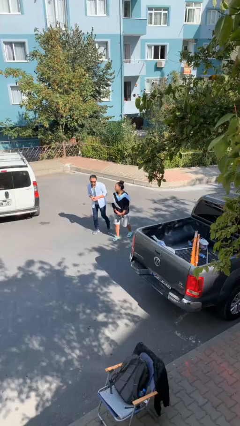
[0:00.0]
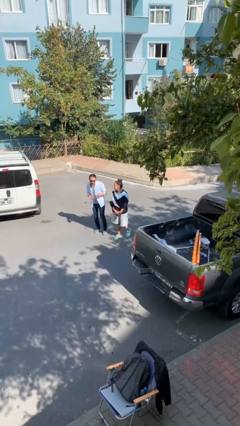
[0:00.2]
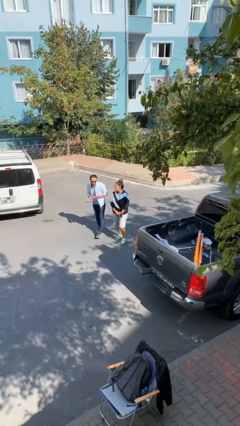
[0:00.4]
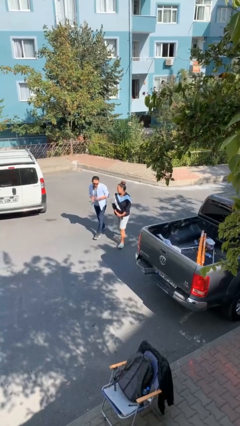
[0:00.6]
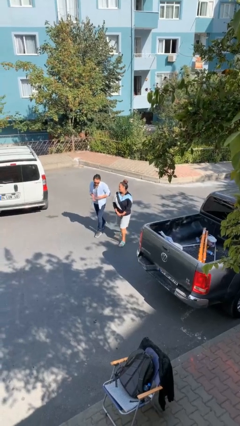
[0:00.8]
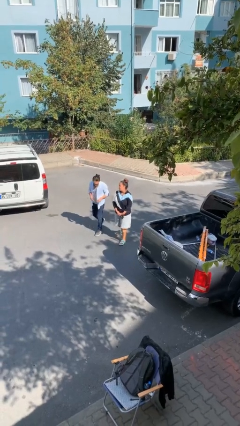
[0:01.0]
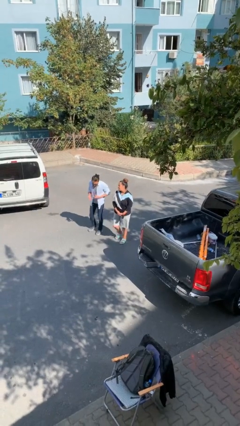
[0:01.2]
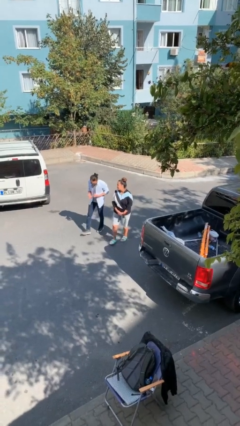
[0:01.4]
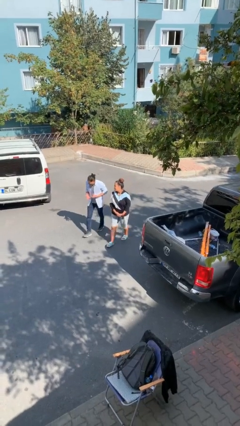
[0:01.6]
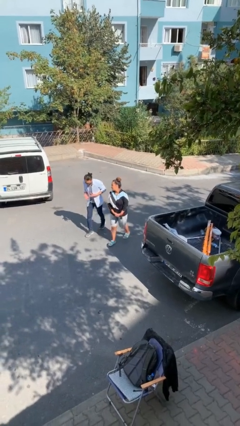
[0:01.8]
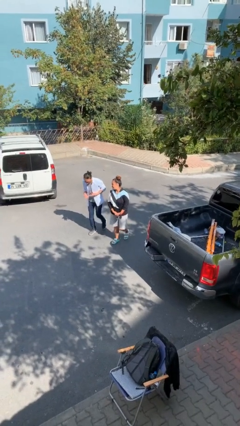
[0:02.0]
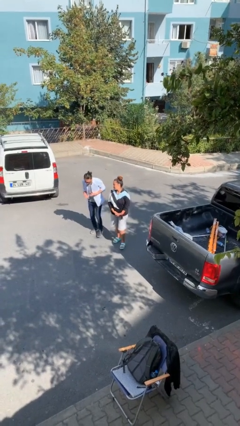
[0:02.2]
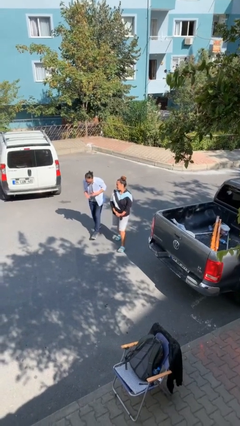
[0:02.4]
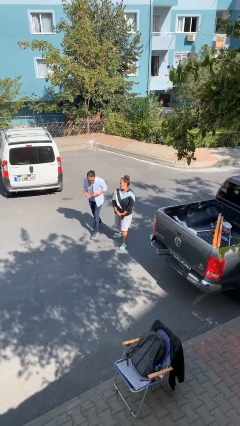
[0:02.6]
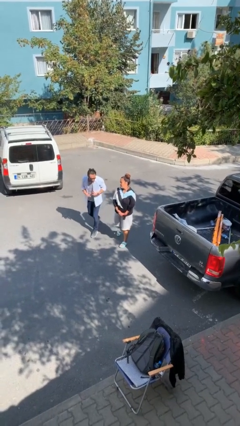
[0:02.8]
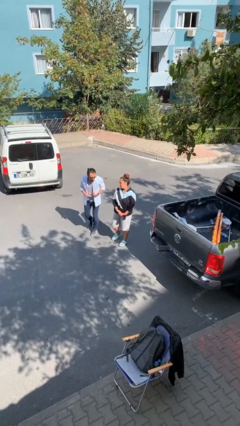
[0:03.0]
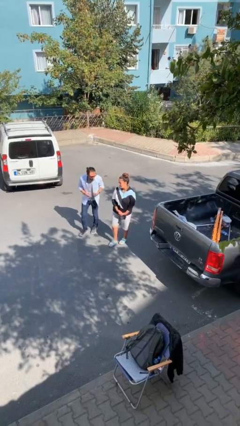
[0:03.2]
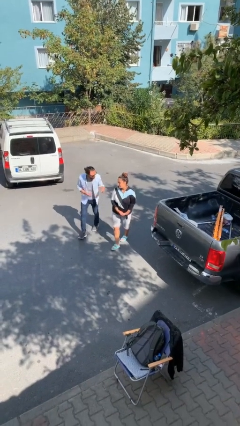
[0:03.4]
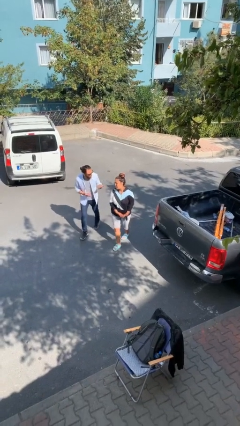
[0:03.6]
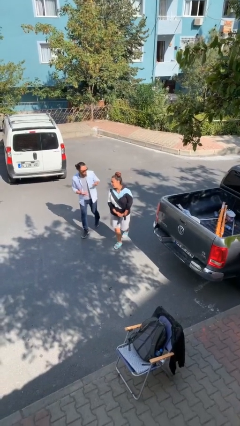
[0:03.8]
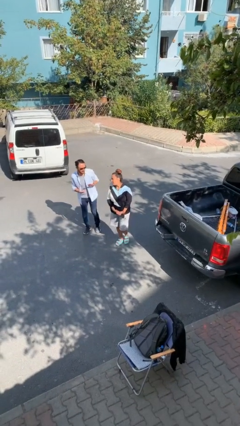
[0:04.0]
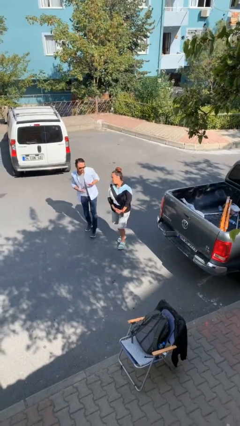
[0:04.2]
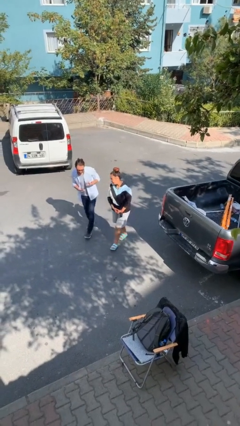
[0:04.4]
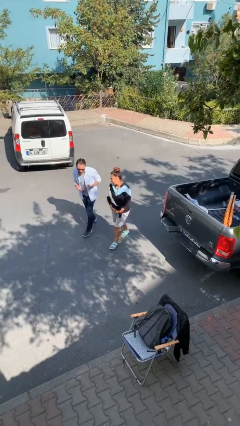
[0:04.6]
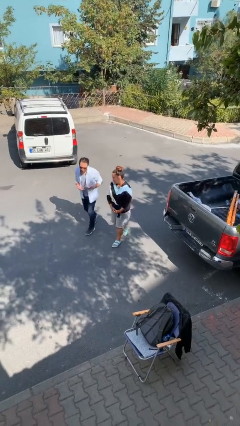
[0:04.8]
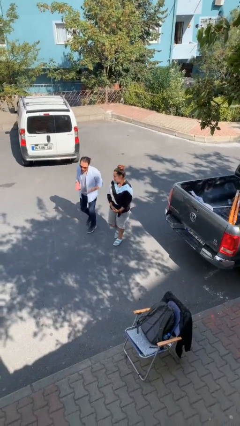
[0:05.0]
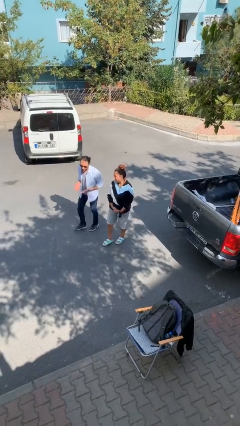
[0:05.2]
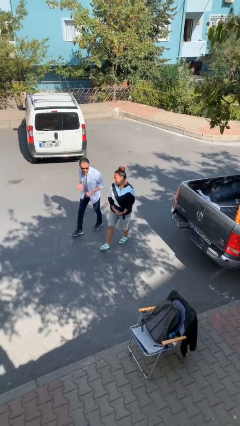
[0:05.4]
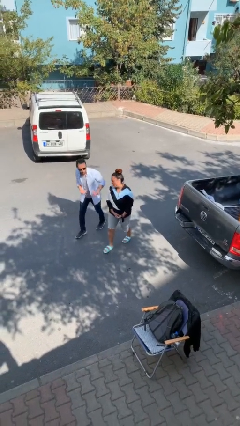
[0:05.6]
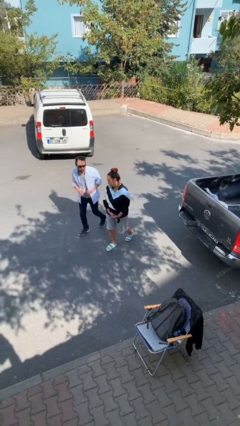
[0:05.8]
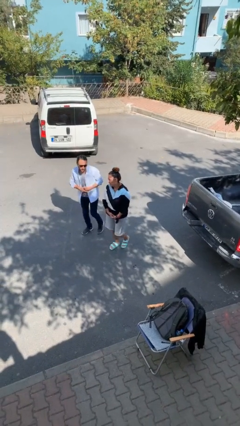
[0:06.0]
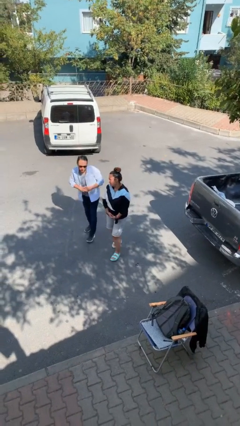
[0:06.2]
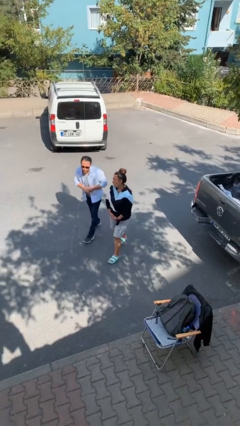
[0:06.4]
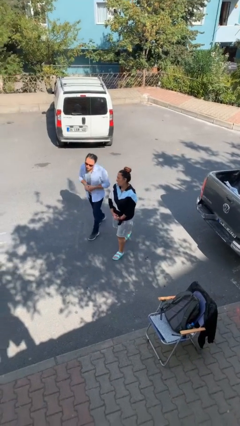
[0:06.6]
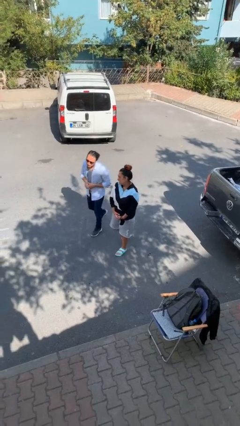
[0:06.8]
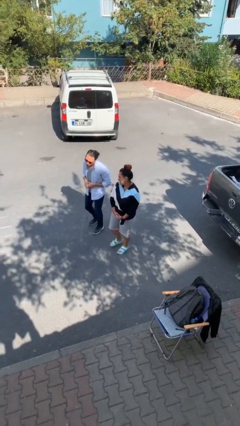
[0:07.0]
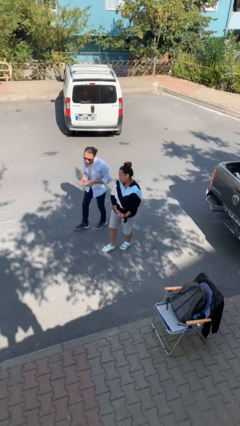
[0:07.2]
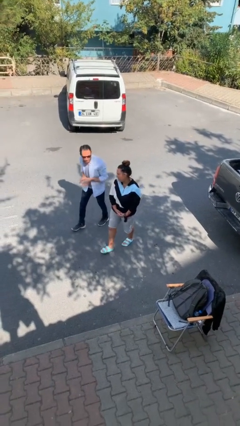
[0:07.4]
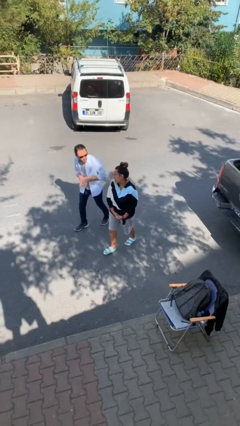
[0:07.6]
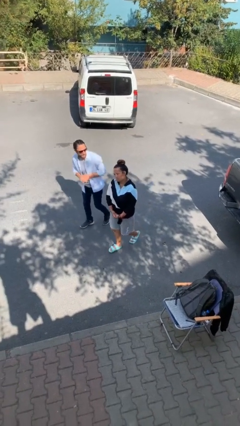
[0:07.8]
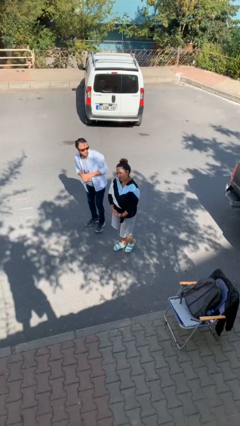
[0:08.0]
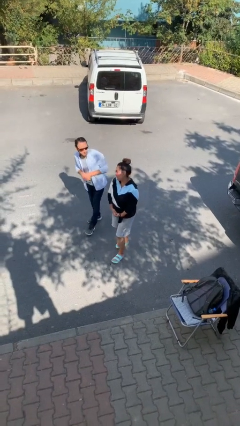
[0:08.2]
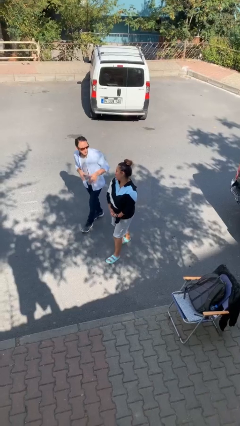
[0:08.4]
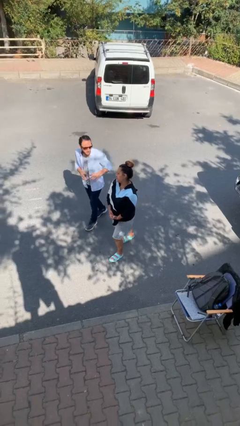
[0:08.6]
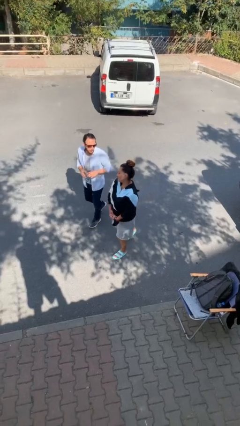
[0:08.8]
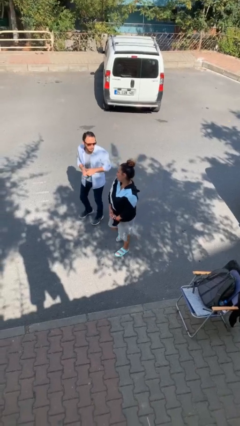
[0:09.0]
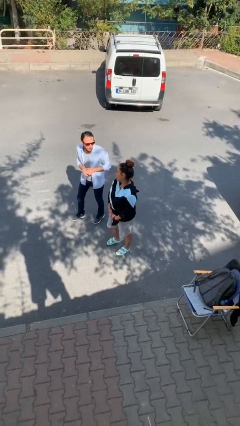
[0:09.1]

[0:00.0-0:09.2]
person talks to person

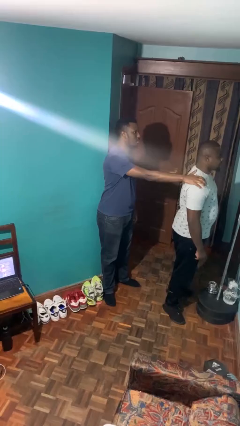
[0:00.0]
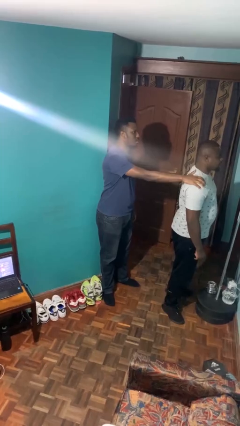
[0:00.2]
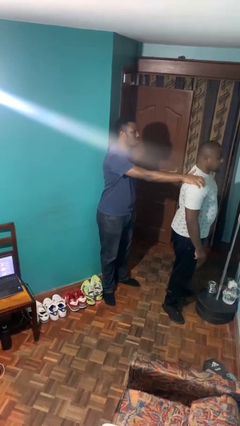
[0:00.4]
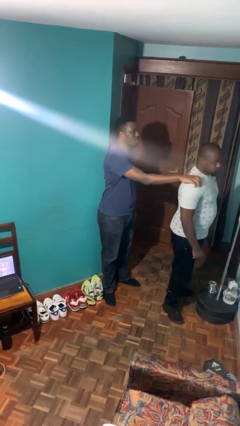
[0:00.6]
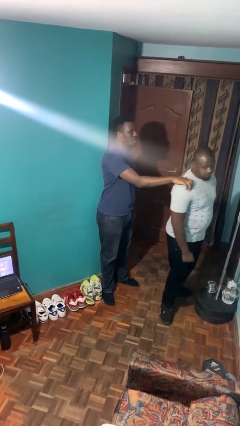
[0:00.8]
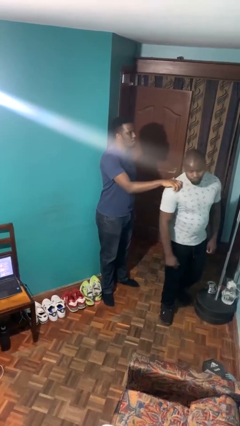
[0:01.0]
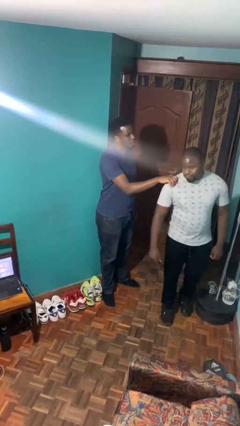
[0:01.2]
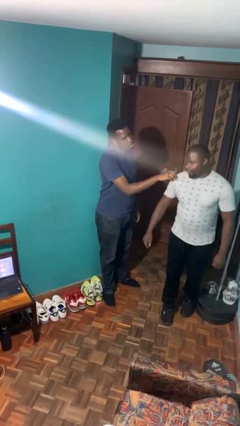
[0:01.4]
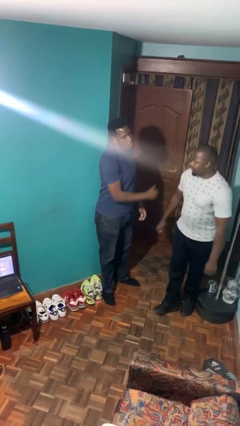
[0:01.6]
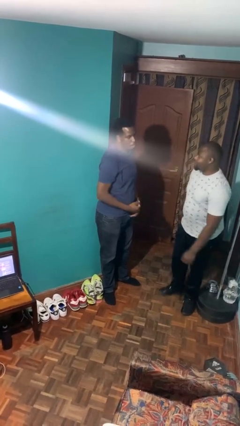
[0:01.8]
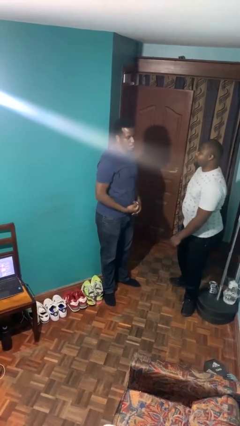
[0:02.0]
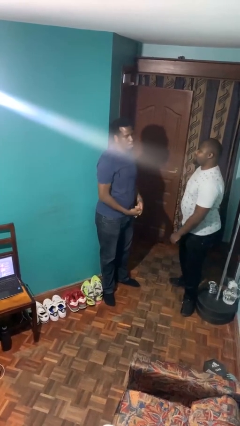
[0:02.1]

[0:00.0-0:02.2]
person spins person around

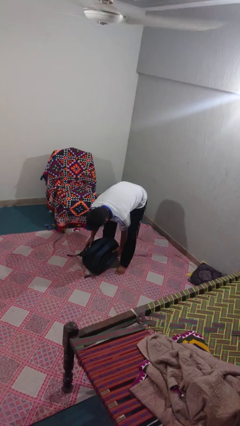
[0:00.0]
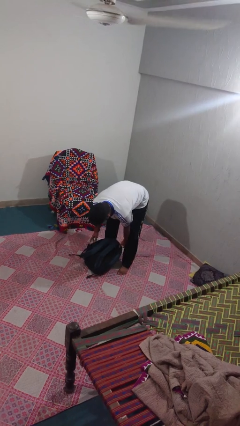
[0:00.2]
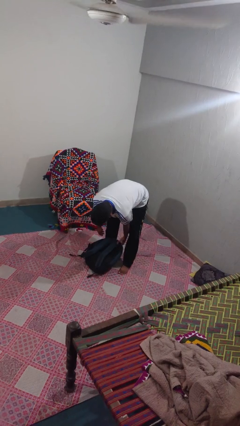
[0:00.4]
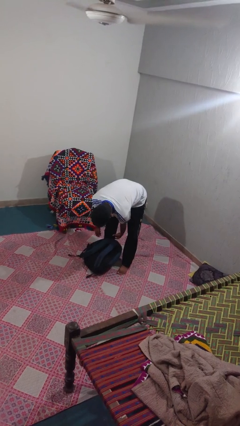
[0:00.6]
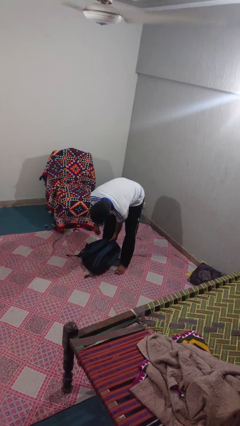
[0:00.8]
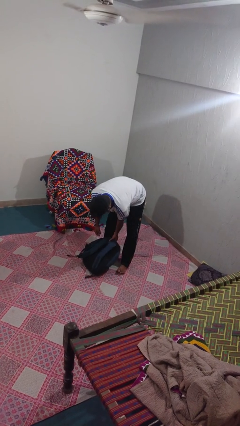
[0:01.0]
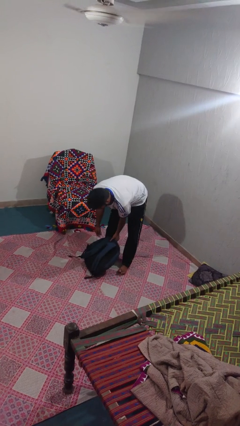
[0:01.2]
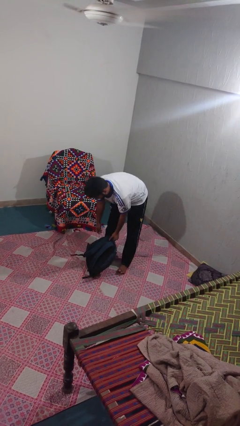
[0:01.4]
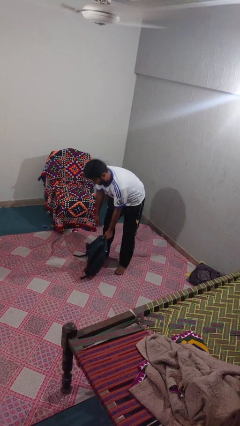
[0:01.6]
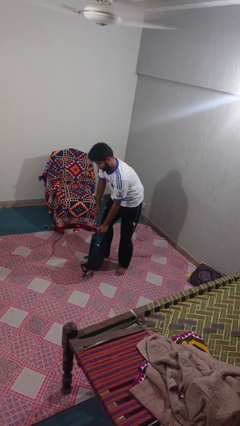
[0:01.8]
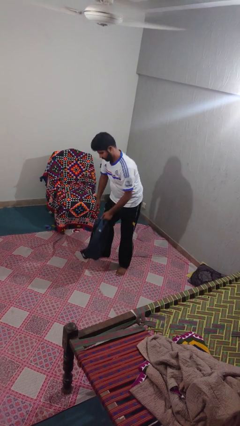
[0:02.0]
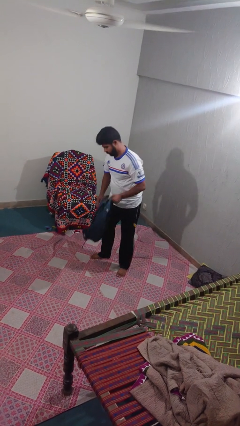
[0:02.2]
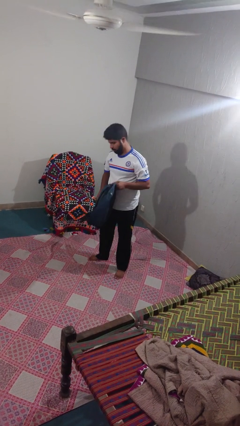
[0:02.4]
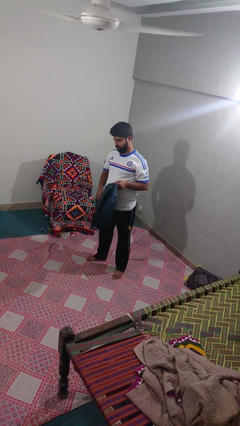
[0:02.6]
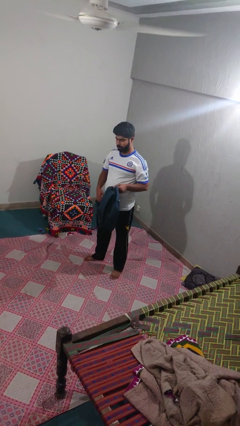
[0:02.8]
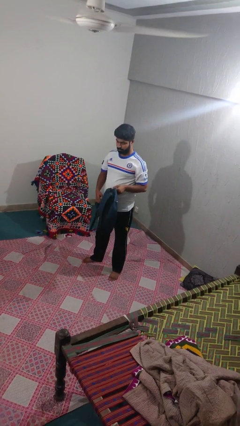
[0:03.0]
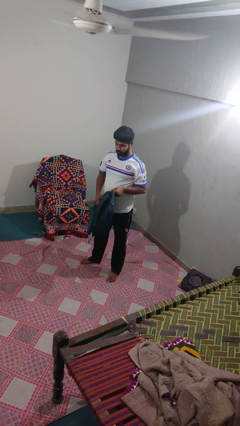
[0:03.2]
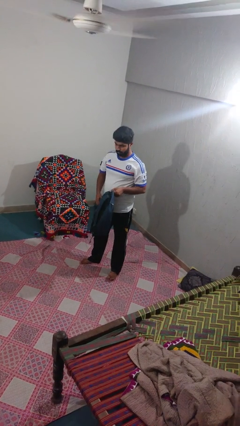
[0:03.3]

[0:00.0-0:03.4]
person picks up object from floor

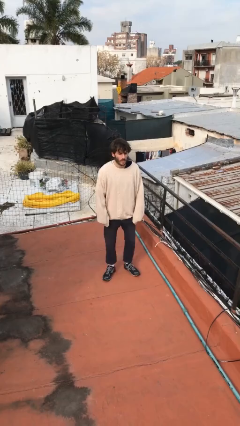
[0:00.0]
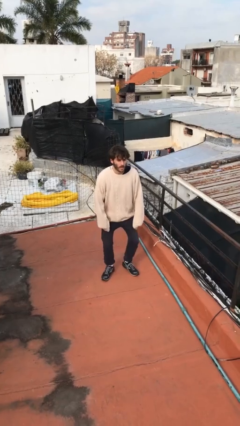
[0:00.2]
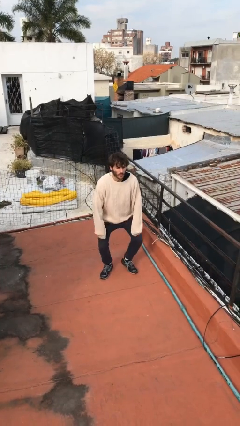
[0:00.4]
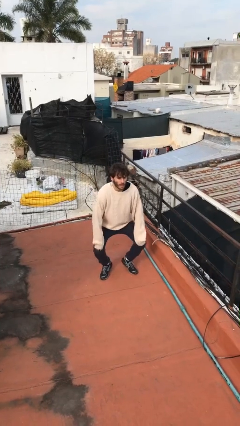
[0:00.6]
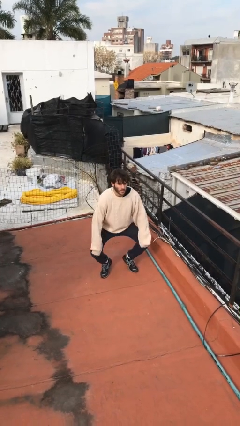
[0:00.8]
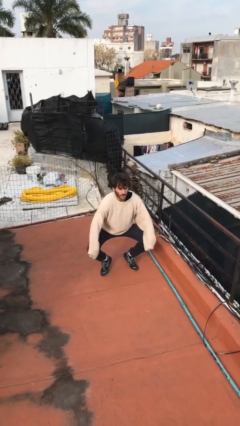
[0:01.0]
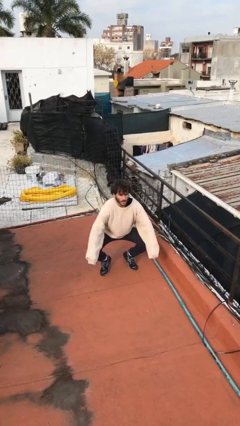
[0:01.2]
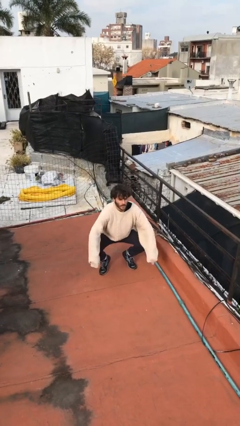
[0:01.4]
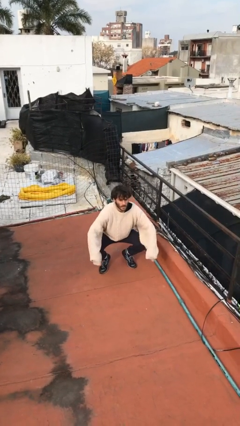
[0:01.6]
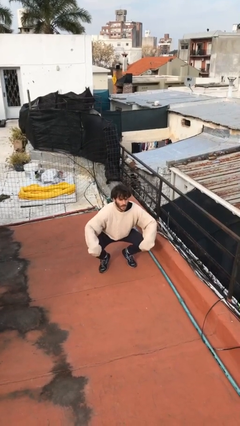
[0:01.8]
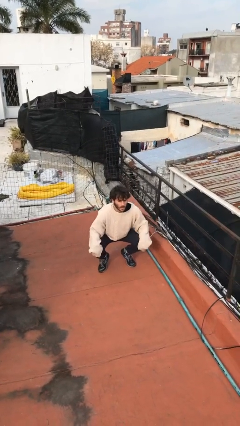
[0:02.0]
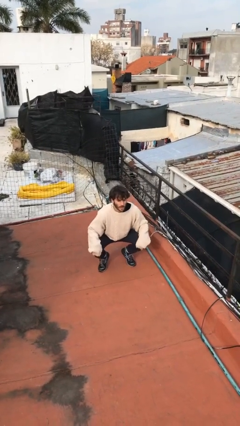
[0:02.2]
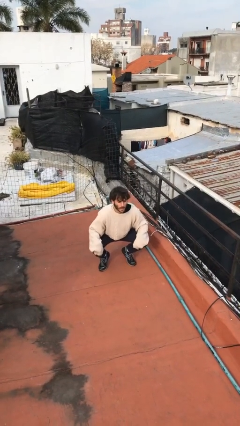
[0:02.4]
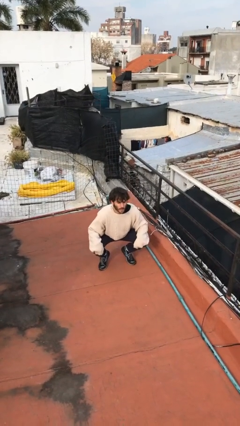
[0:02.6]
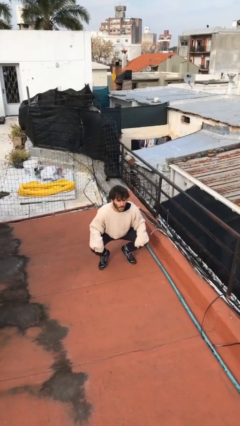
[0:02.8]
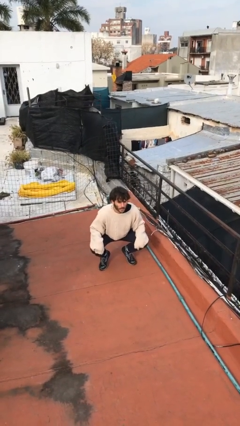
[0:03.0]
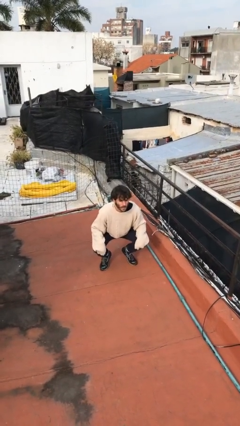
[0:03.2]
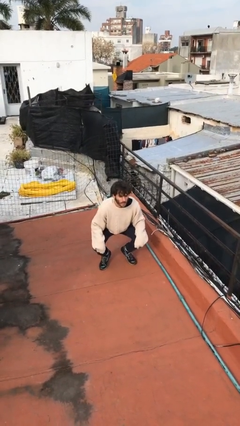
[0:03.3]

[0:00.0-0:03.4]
person squats
